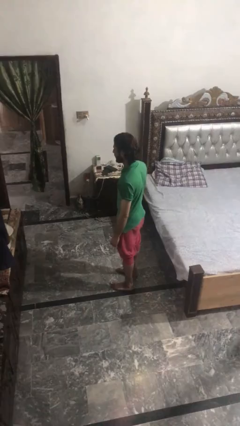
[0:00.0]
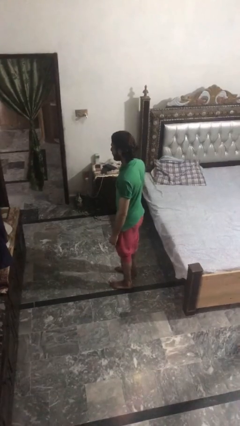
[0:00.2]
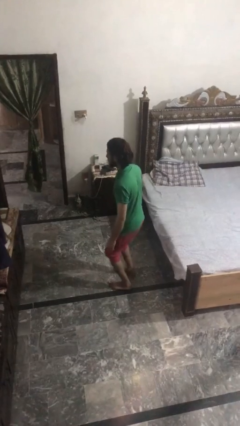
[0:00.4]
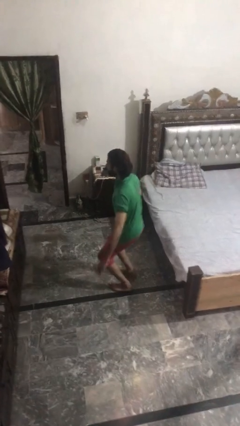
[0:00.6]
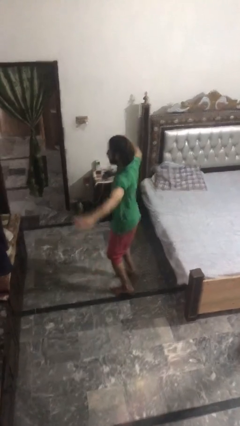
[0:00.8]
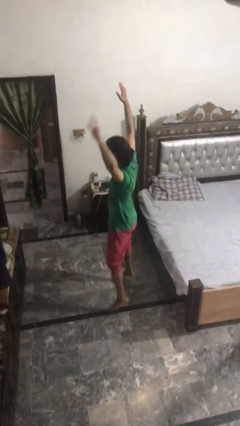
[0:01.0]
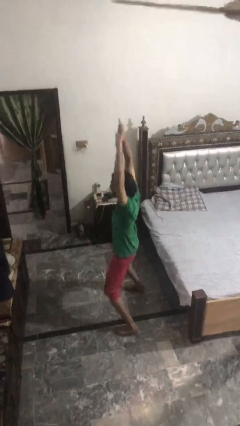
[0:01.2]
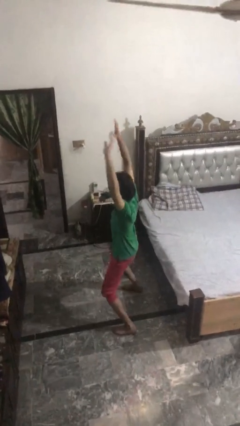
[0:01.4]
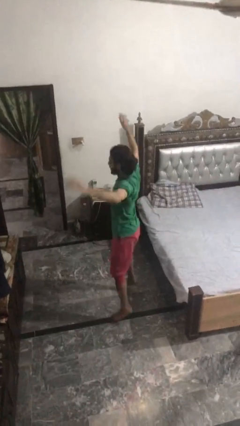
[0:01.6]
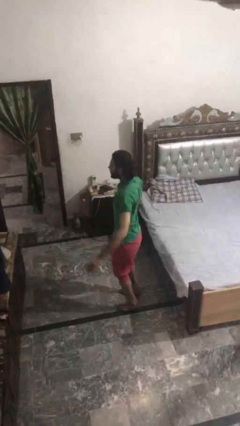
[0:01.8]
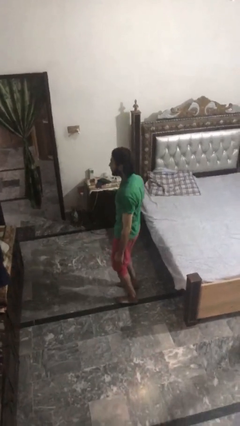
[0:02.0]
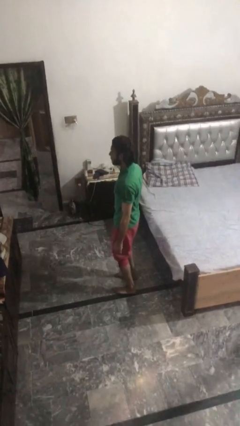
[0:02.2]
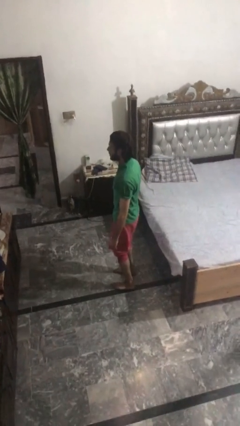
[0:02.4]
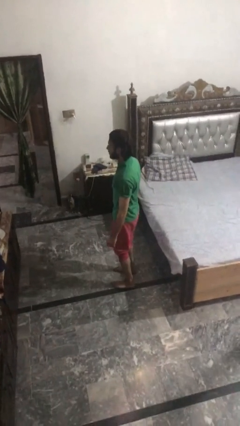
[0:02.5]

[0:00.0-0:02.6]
person exercises with jumping jacks

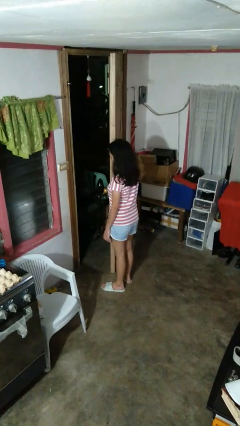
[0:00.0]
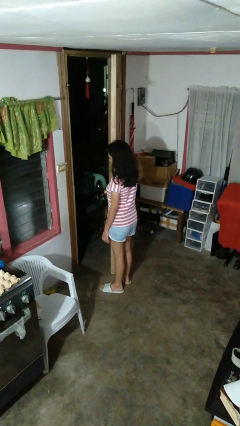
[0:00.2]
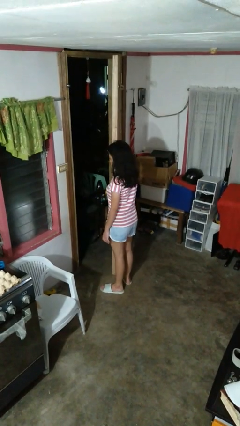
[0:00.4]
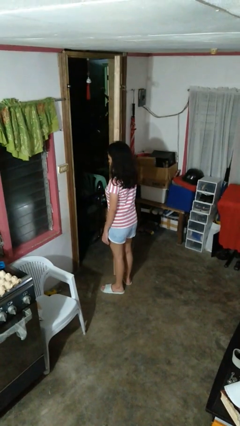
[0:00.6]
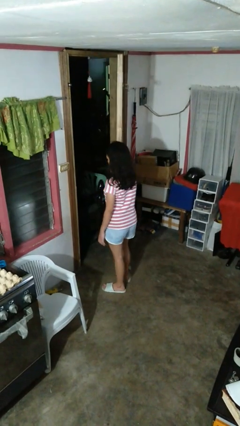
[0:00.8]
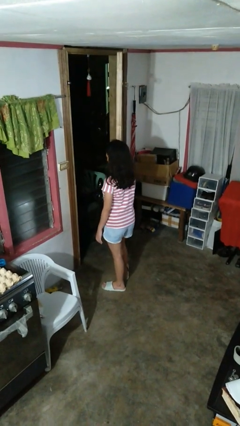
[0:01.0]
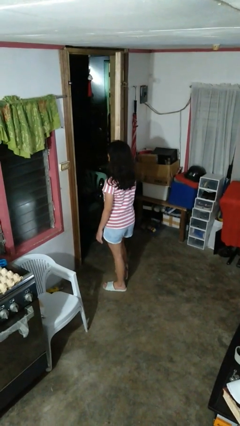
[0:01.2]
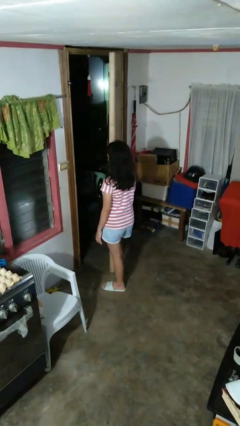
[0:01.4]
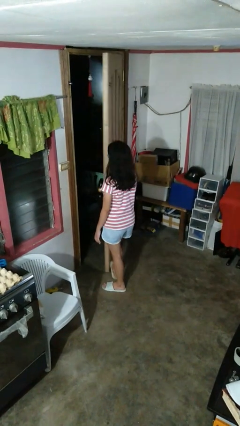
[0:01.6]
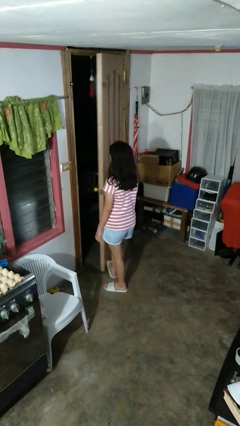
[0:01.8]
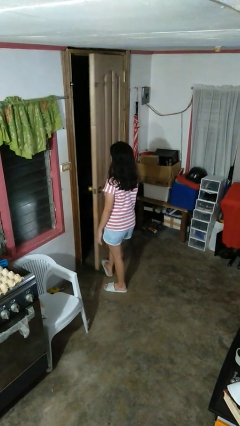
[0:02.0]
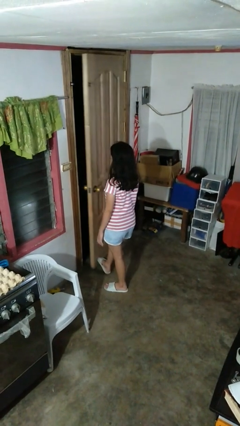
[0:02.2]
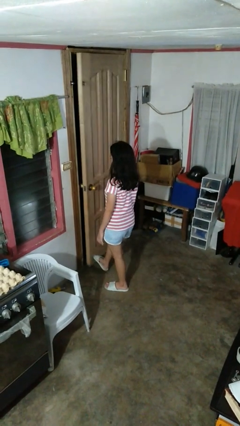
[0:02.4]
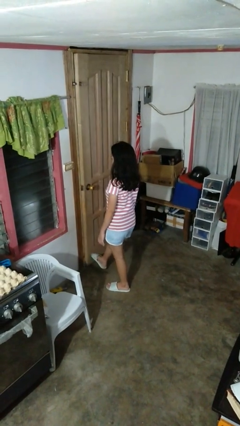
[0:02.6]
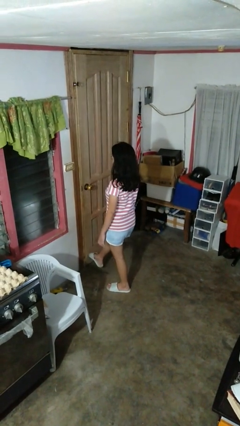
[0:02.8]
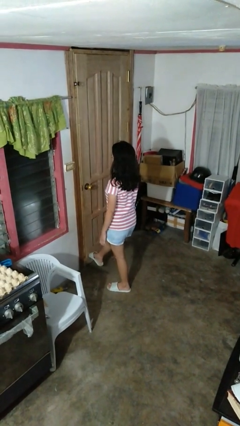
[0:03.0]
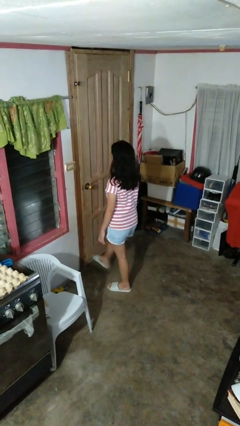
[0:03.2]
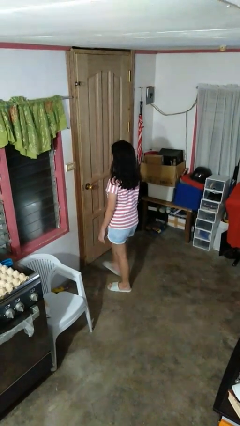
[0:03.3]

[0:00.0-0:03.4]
person closes door with foot

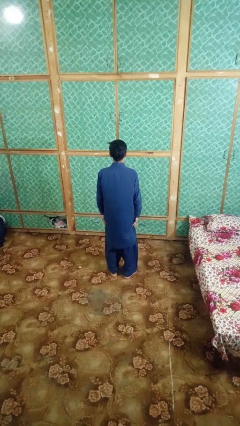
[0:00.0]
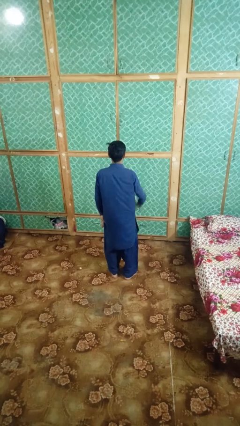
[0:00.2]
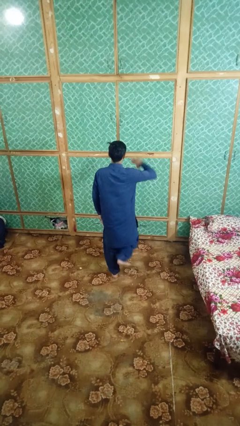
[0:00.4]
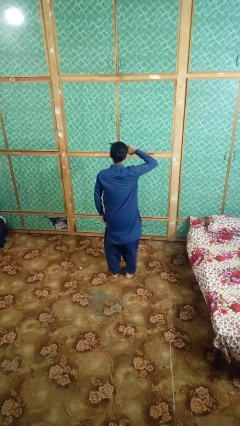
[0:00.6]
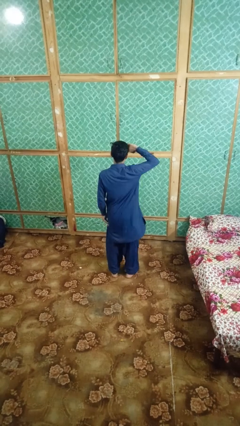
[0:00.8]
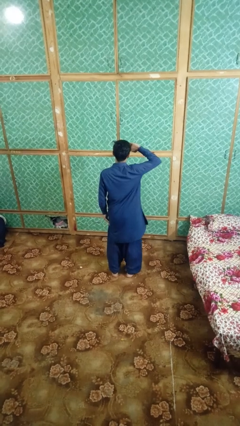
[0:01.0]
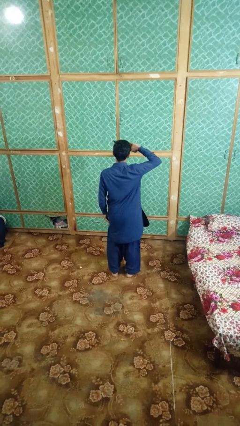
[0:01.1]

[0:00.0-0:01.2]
person salutes

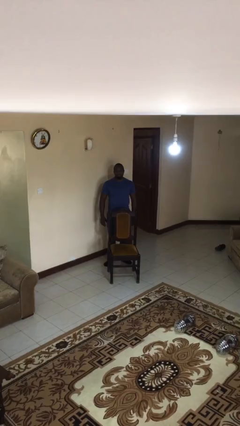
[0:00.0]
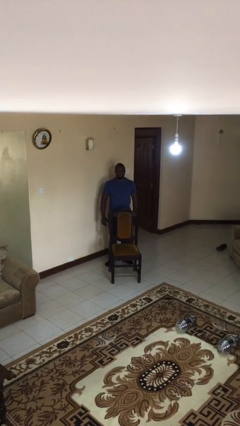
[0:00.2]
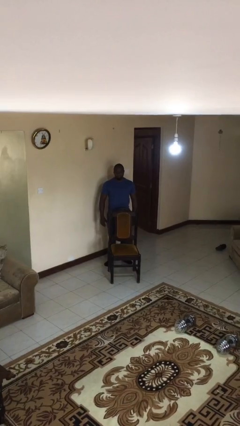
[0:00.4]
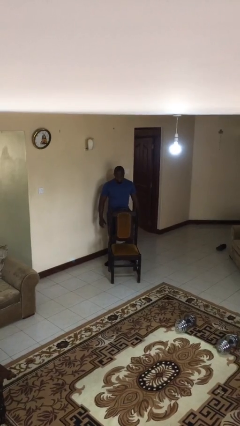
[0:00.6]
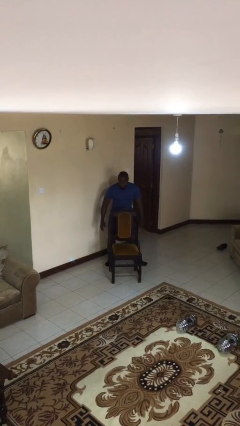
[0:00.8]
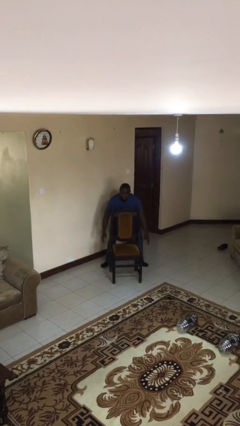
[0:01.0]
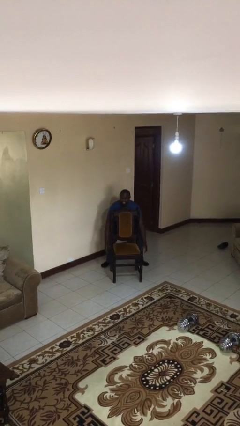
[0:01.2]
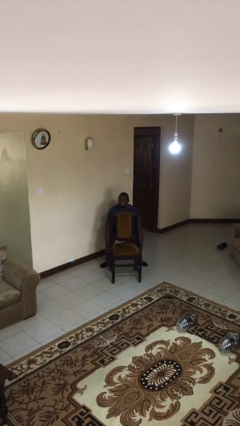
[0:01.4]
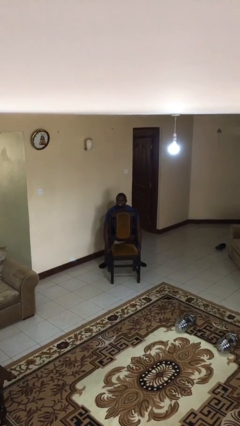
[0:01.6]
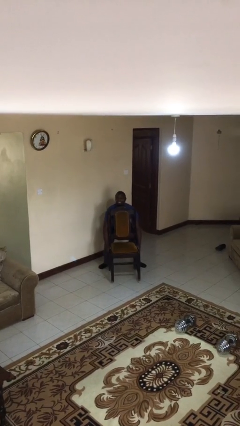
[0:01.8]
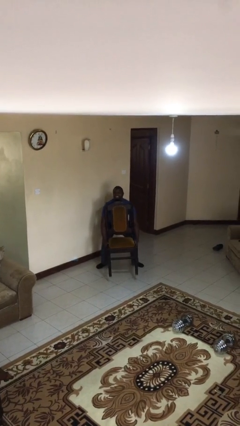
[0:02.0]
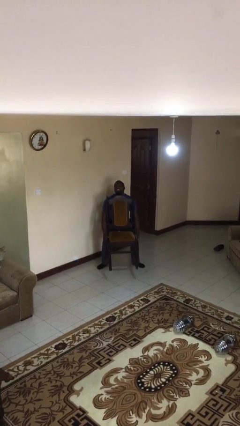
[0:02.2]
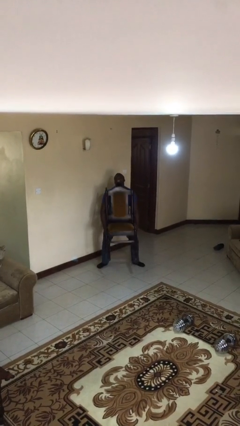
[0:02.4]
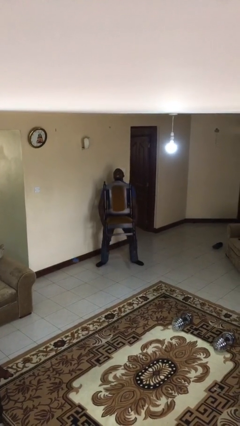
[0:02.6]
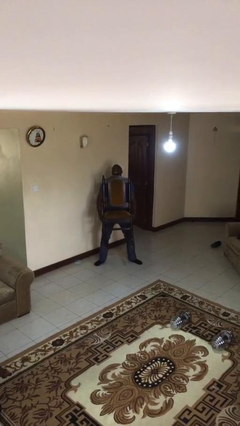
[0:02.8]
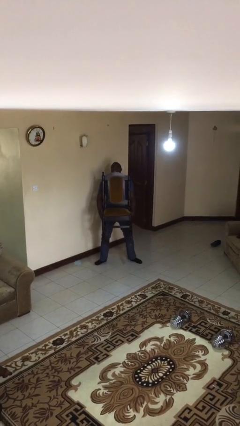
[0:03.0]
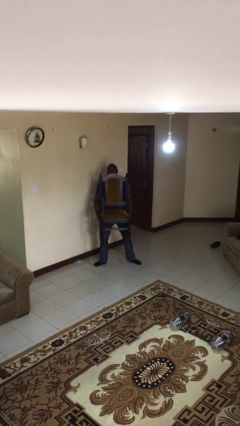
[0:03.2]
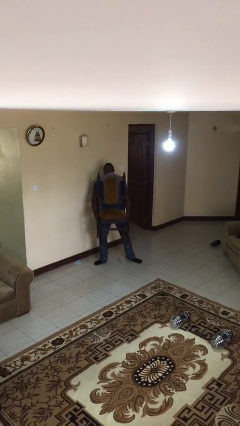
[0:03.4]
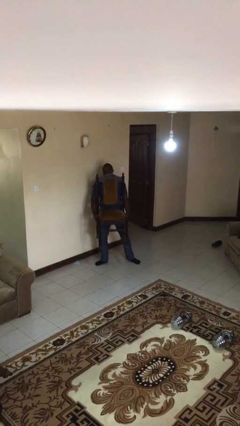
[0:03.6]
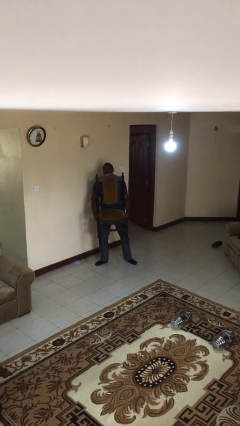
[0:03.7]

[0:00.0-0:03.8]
person picks up object from floor

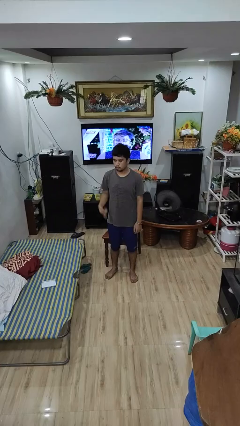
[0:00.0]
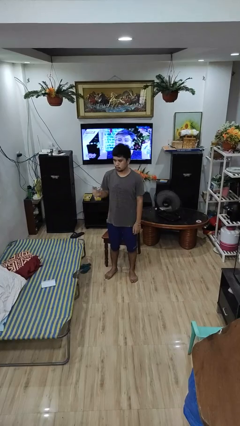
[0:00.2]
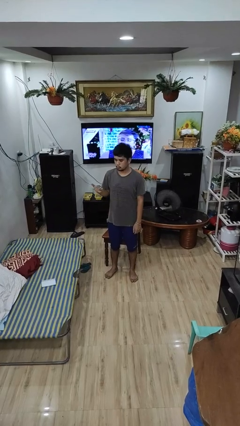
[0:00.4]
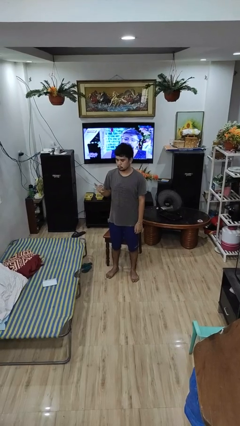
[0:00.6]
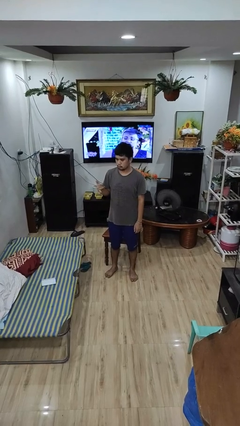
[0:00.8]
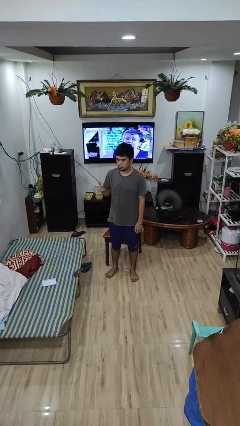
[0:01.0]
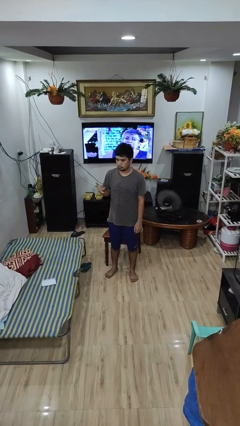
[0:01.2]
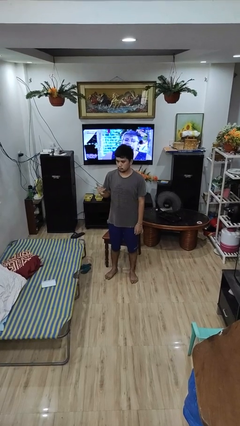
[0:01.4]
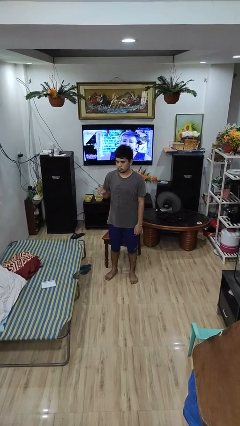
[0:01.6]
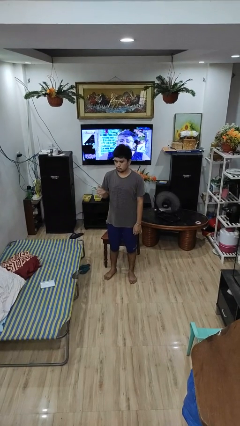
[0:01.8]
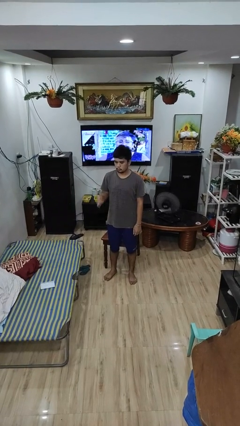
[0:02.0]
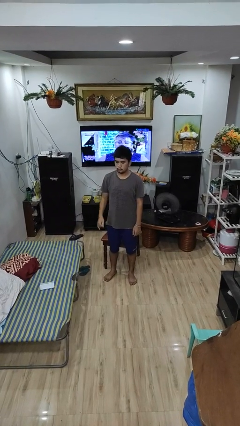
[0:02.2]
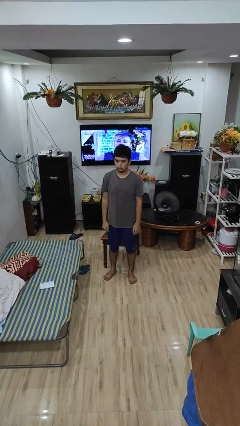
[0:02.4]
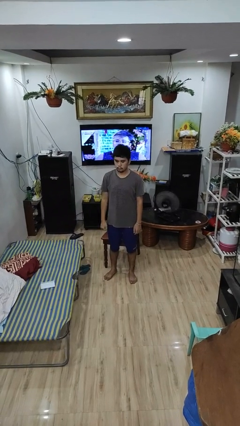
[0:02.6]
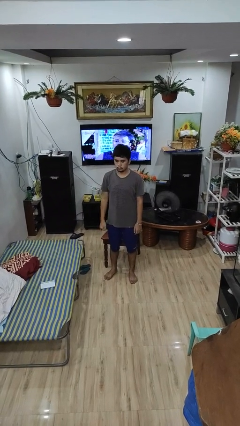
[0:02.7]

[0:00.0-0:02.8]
person gestures hang loose

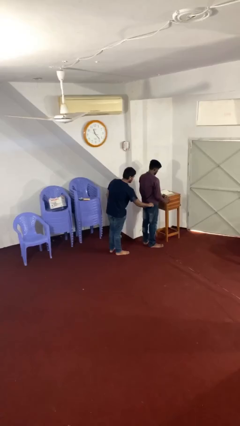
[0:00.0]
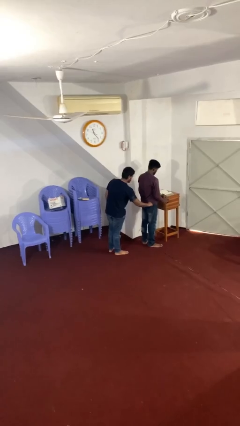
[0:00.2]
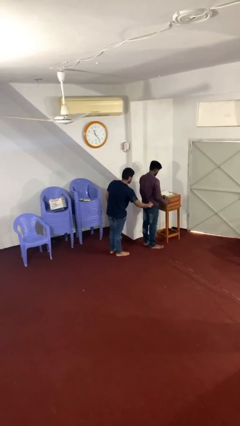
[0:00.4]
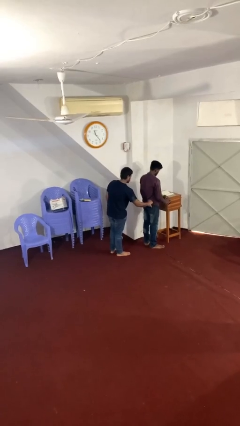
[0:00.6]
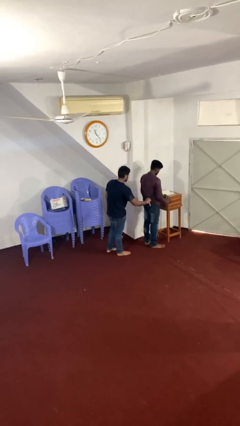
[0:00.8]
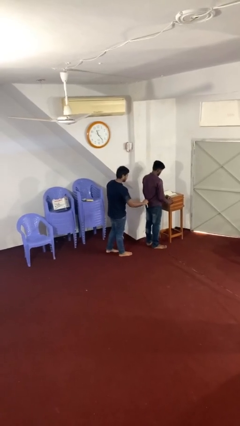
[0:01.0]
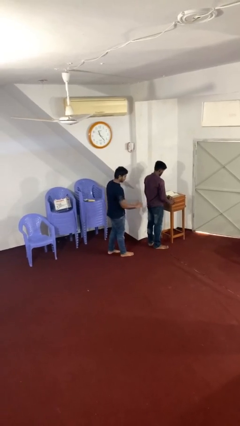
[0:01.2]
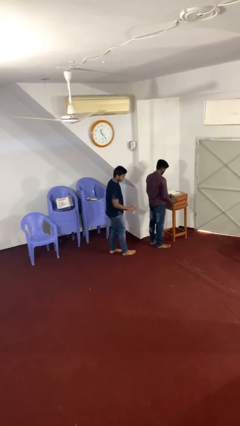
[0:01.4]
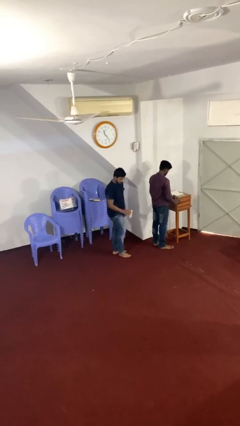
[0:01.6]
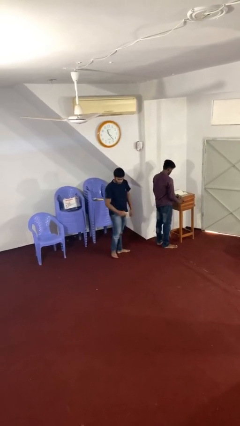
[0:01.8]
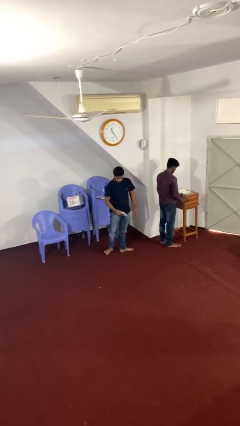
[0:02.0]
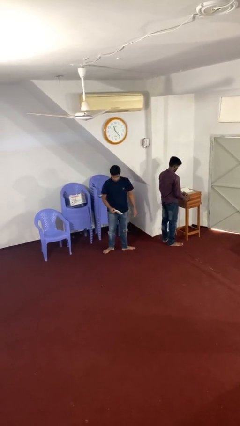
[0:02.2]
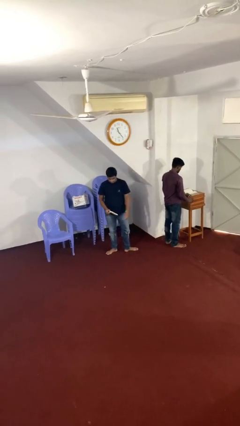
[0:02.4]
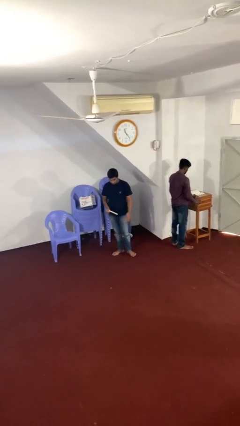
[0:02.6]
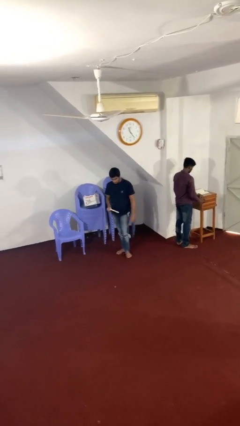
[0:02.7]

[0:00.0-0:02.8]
person steals object from person

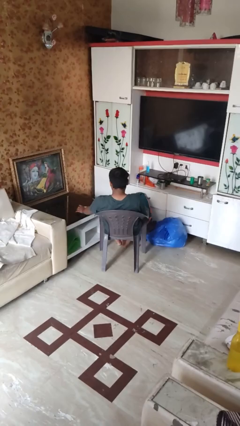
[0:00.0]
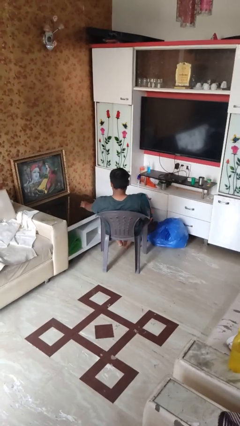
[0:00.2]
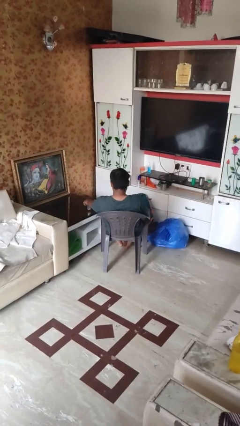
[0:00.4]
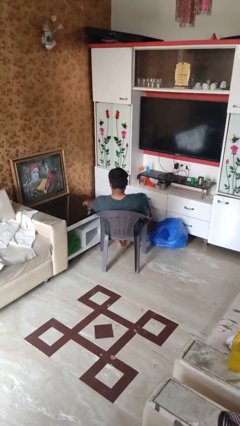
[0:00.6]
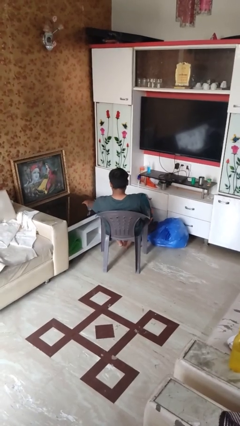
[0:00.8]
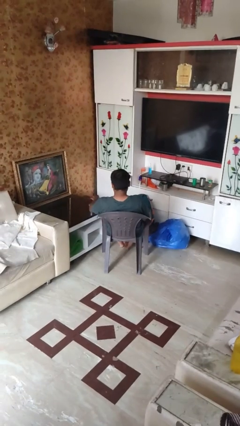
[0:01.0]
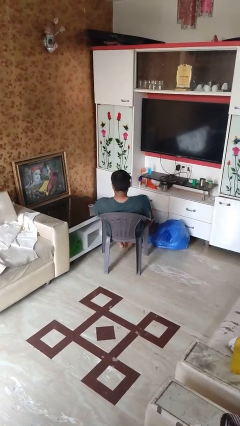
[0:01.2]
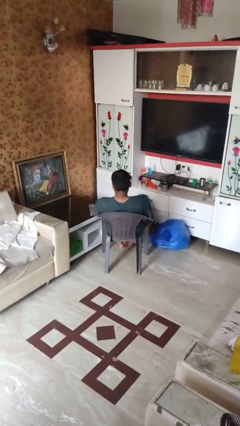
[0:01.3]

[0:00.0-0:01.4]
person sets upright glass
